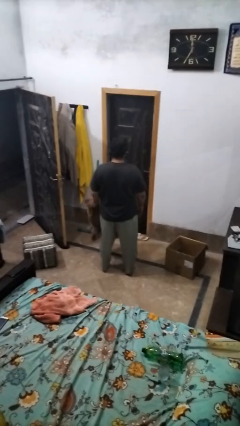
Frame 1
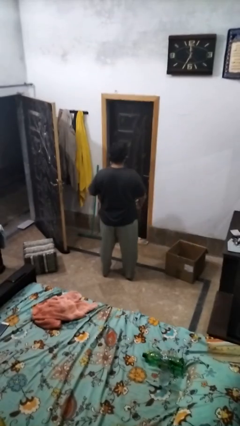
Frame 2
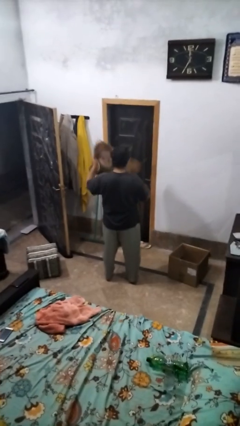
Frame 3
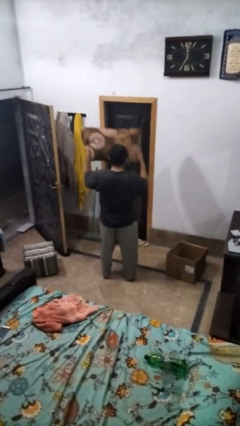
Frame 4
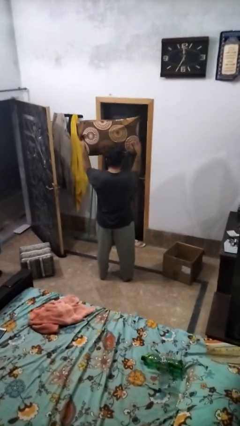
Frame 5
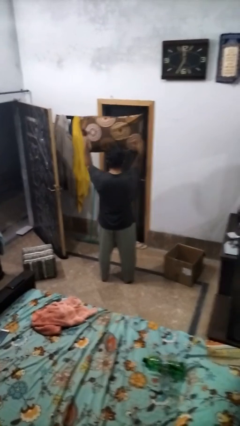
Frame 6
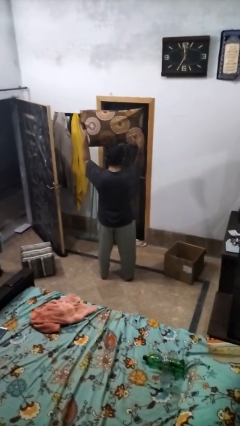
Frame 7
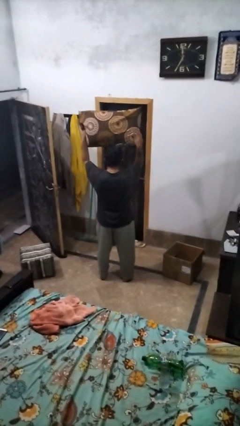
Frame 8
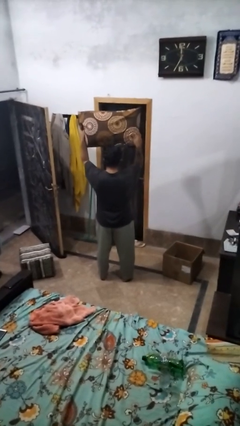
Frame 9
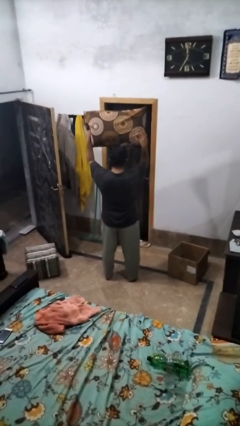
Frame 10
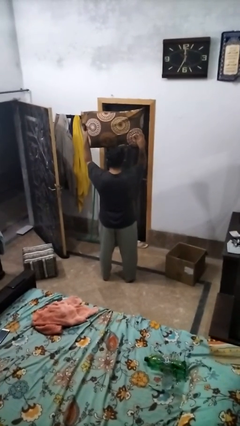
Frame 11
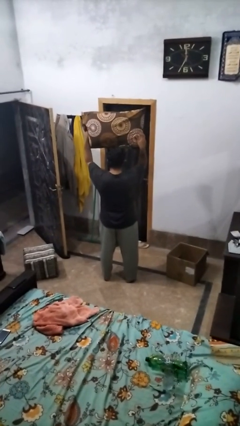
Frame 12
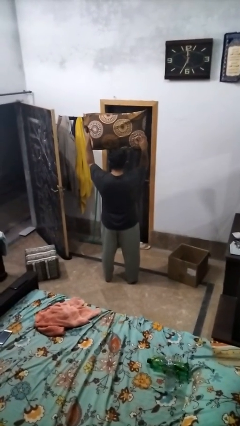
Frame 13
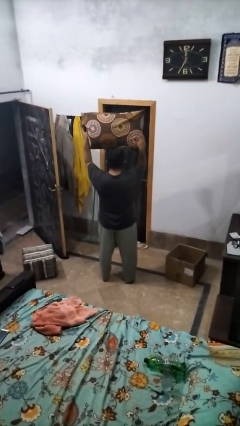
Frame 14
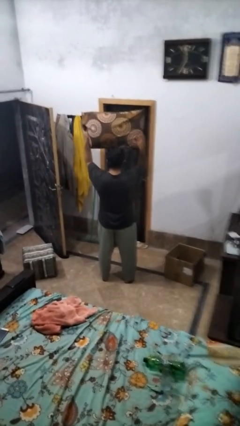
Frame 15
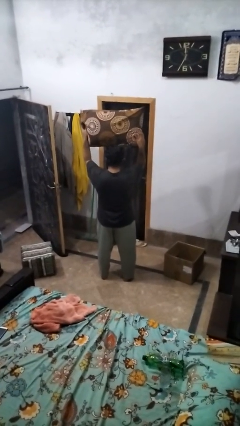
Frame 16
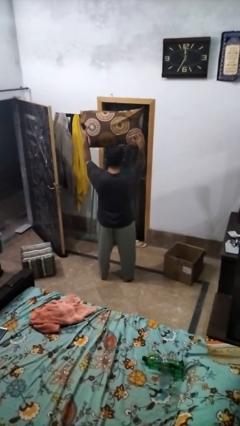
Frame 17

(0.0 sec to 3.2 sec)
person holds object above head

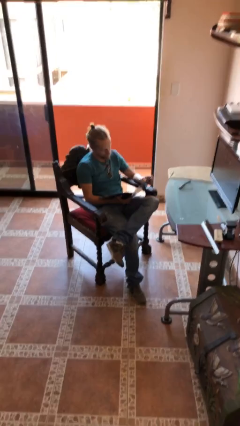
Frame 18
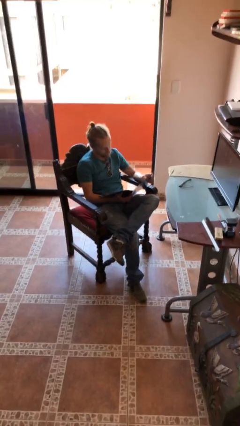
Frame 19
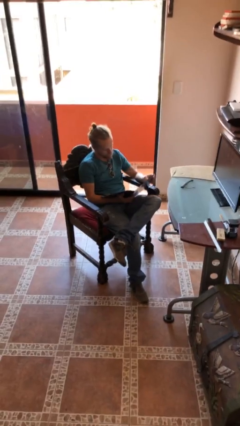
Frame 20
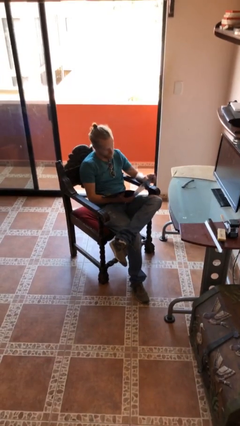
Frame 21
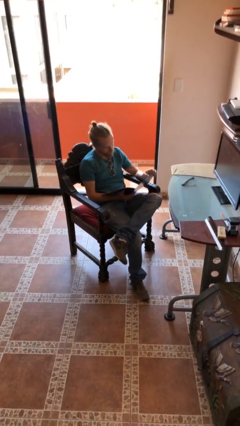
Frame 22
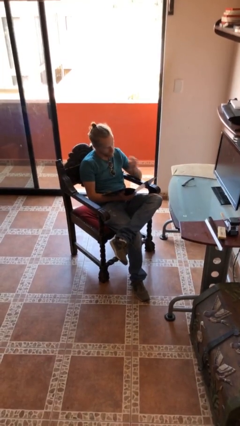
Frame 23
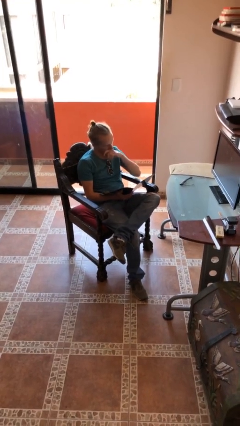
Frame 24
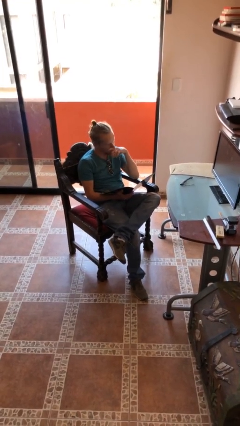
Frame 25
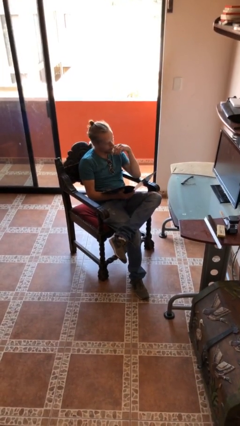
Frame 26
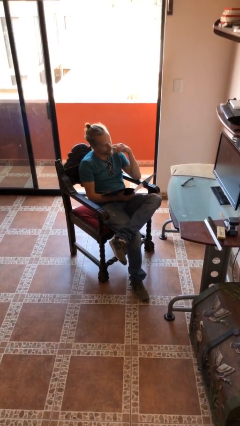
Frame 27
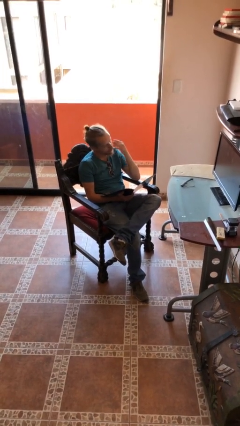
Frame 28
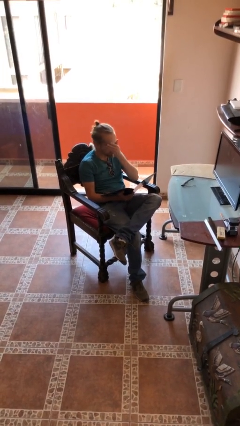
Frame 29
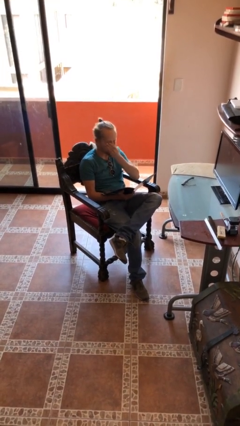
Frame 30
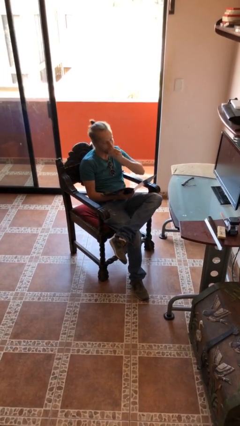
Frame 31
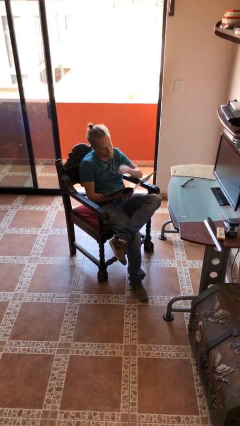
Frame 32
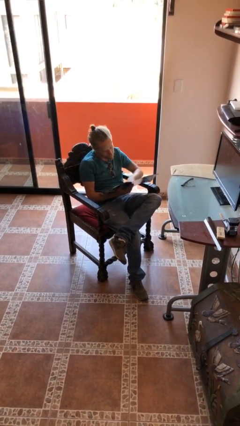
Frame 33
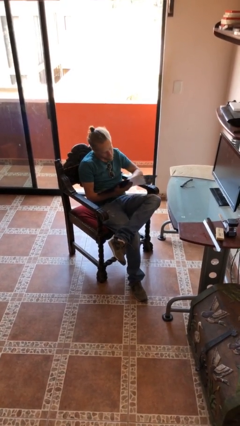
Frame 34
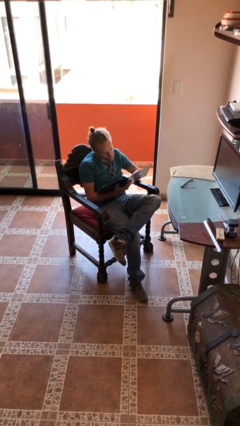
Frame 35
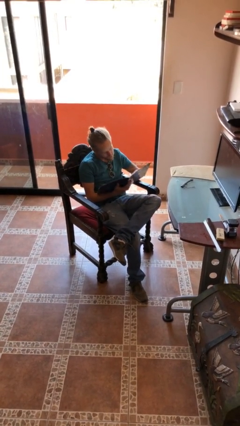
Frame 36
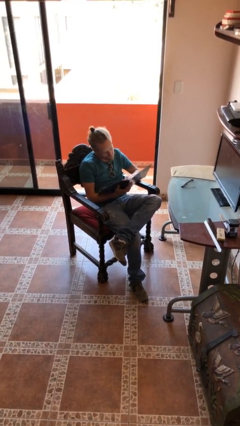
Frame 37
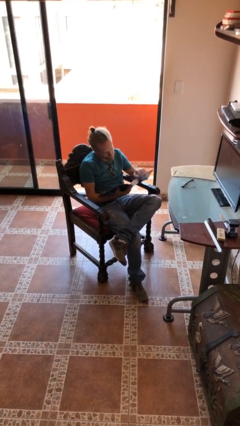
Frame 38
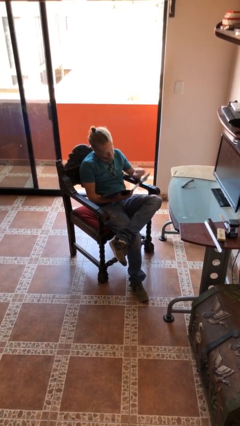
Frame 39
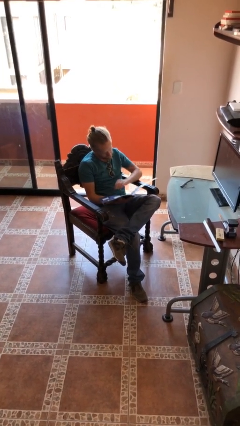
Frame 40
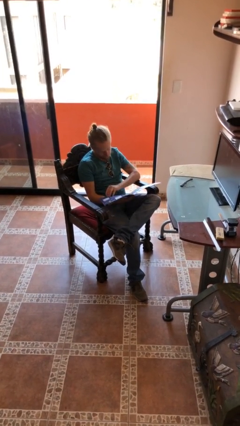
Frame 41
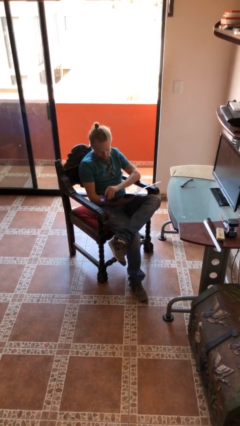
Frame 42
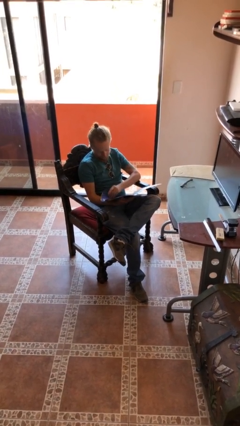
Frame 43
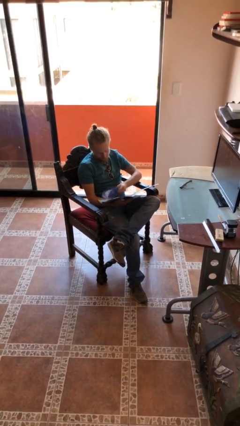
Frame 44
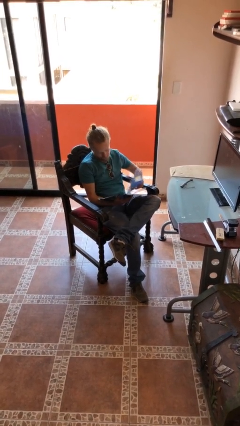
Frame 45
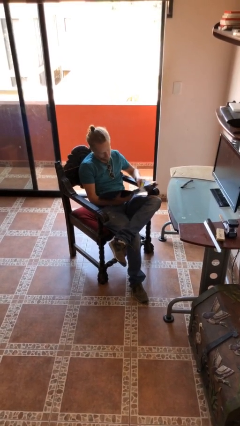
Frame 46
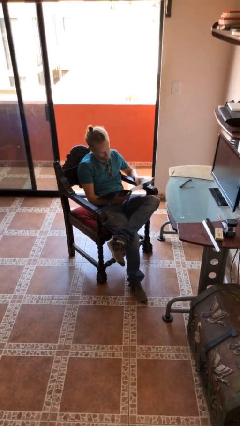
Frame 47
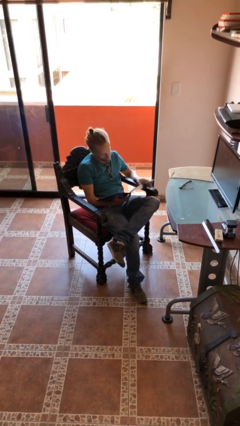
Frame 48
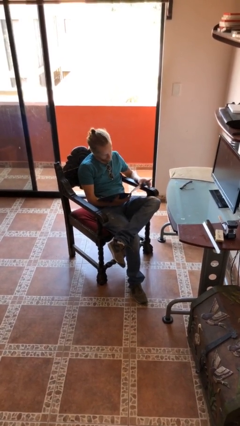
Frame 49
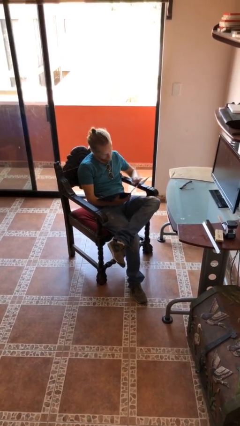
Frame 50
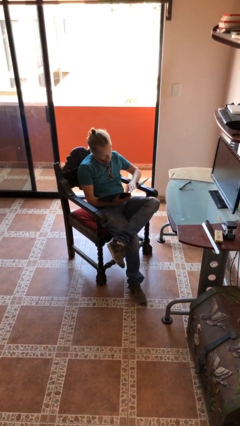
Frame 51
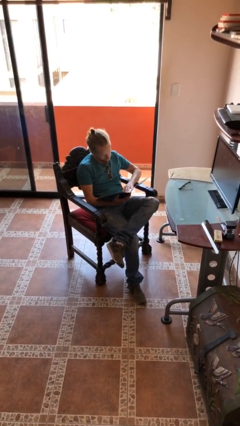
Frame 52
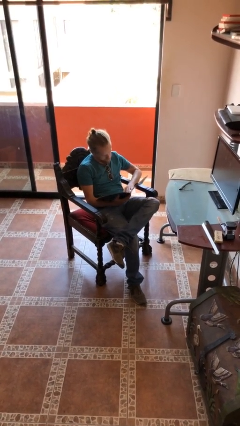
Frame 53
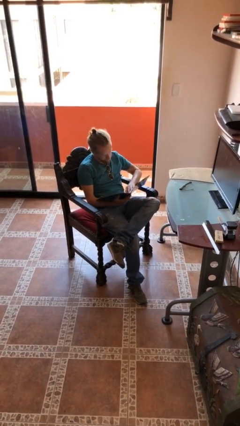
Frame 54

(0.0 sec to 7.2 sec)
person reads document

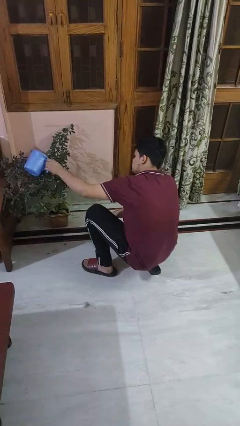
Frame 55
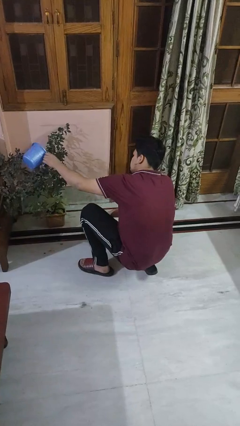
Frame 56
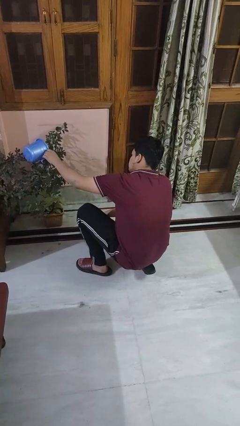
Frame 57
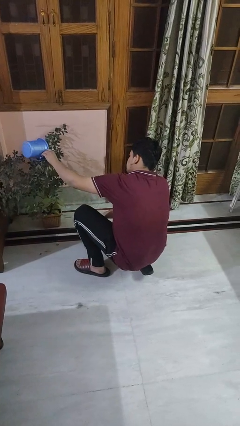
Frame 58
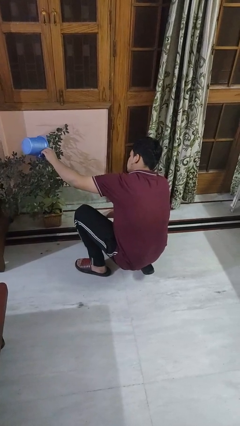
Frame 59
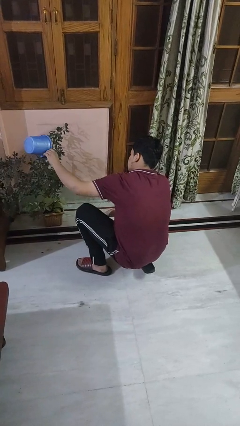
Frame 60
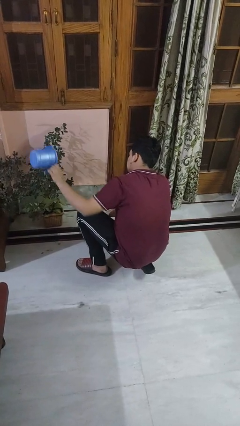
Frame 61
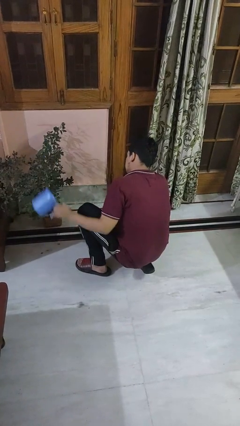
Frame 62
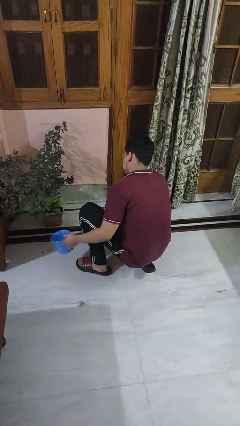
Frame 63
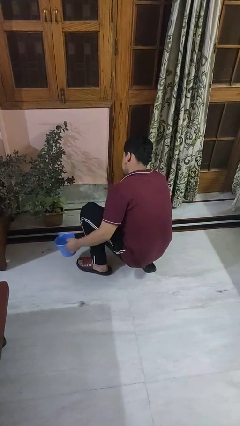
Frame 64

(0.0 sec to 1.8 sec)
person waters houseplant

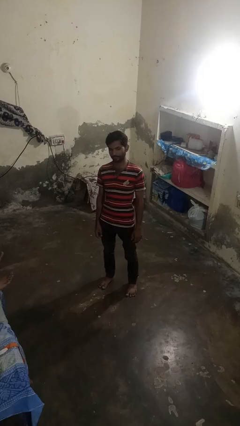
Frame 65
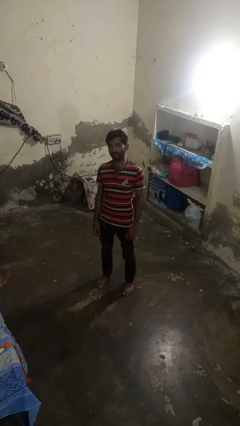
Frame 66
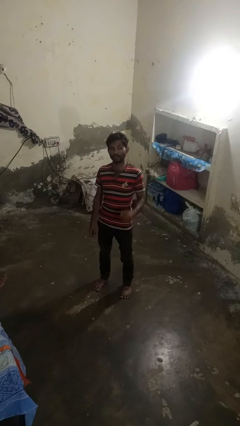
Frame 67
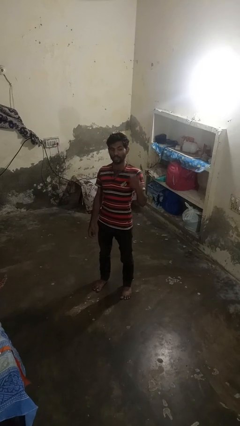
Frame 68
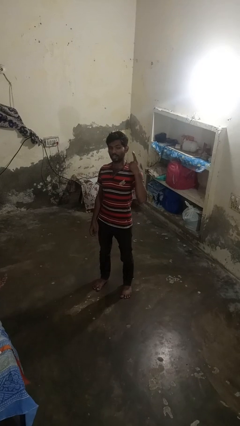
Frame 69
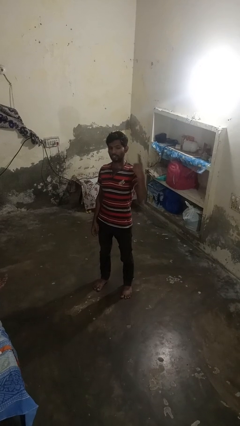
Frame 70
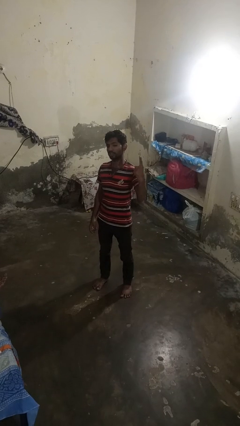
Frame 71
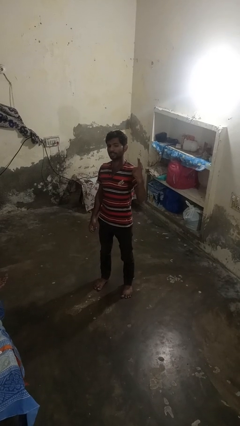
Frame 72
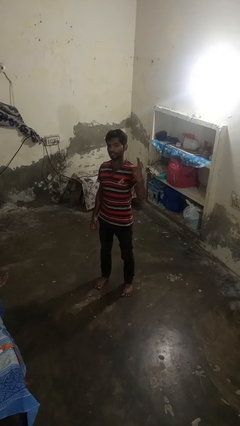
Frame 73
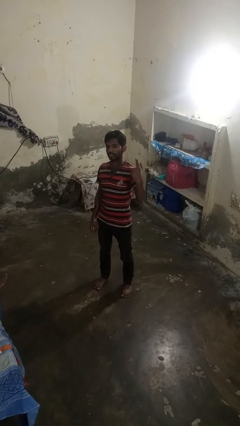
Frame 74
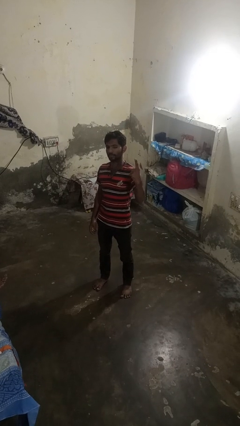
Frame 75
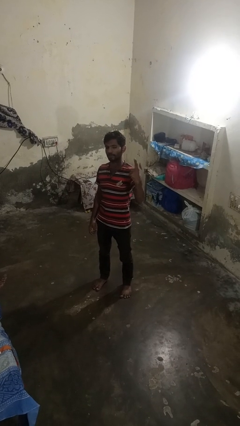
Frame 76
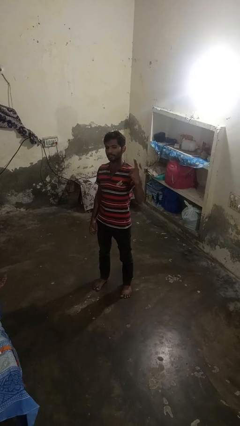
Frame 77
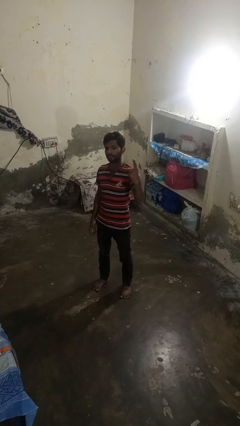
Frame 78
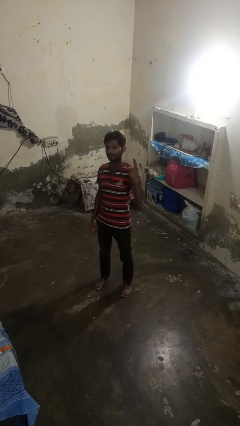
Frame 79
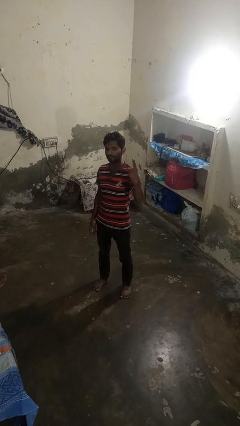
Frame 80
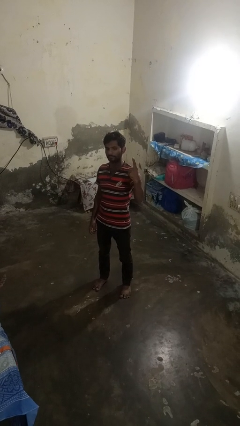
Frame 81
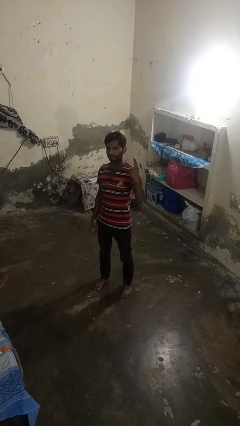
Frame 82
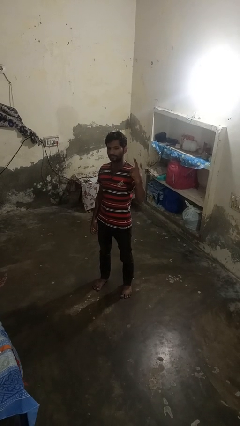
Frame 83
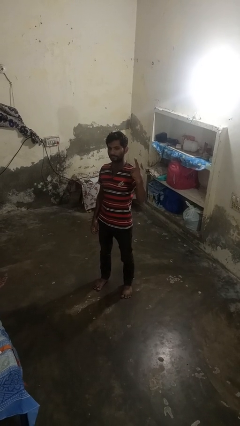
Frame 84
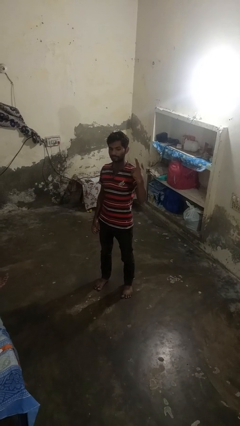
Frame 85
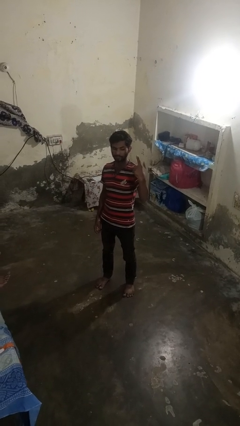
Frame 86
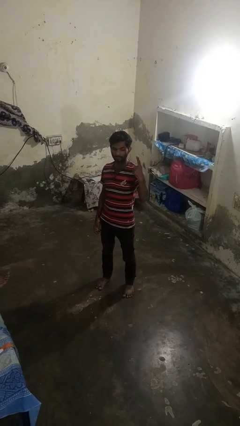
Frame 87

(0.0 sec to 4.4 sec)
person gestures number one

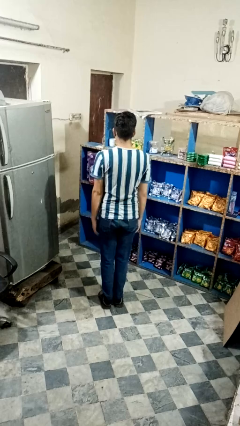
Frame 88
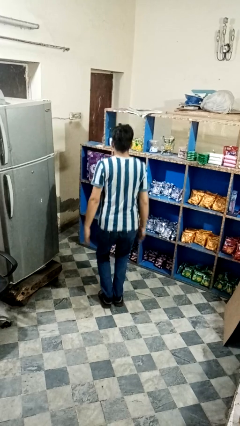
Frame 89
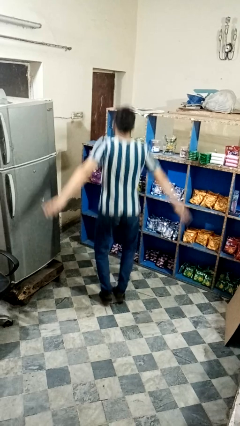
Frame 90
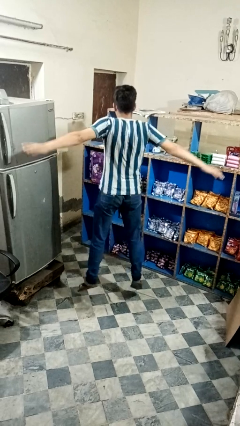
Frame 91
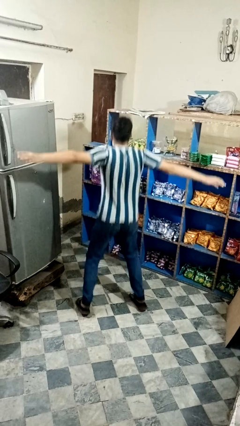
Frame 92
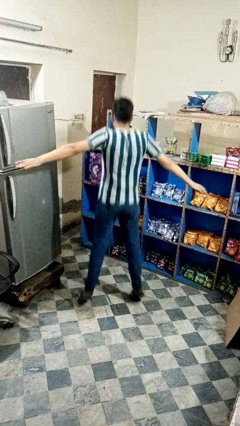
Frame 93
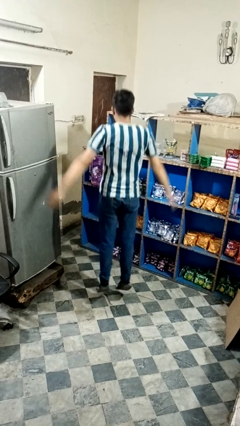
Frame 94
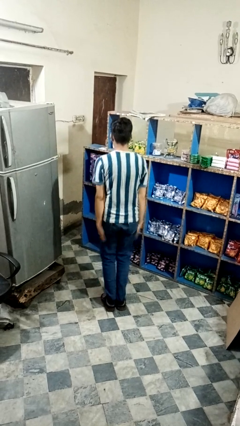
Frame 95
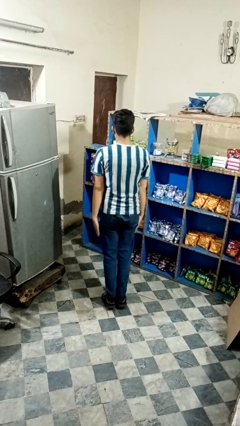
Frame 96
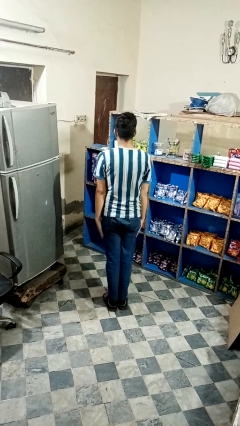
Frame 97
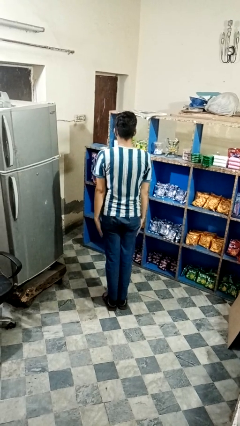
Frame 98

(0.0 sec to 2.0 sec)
person exercises with jumping jacks
